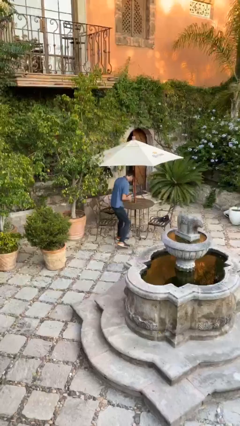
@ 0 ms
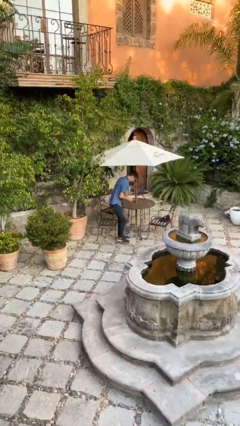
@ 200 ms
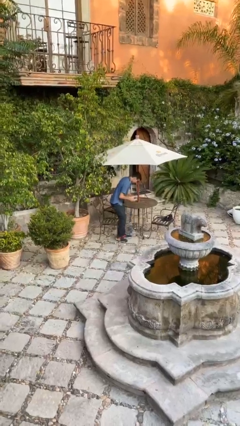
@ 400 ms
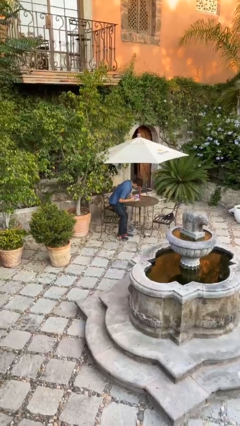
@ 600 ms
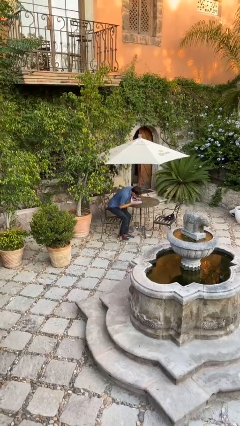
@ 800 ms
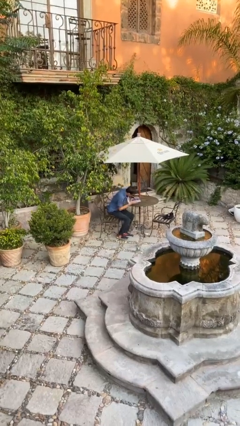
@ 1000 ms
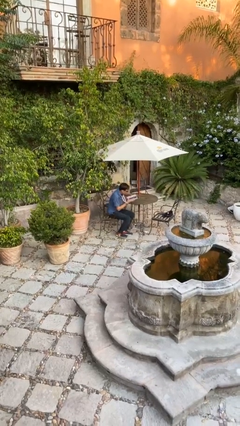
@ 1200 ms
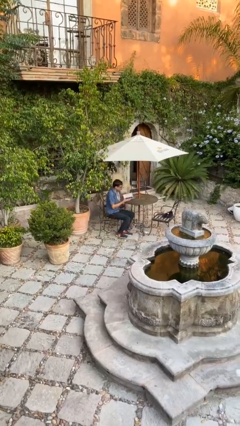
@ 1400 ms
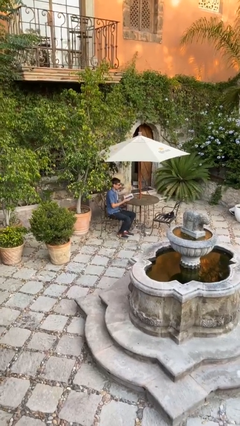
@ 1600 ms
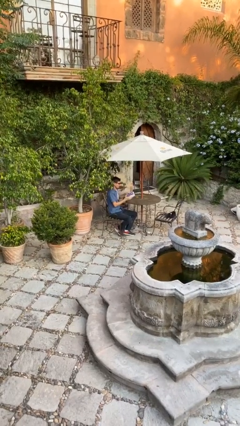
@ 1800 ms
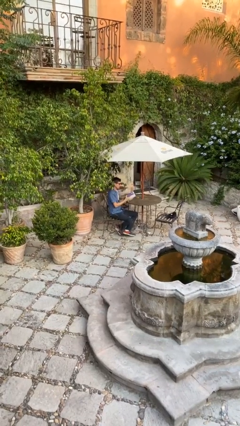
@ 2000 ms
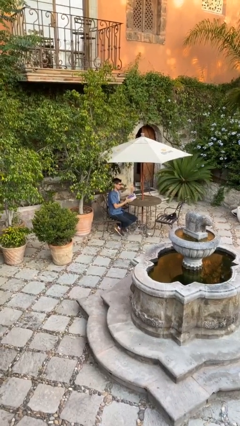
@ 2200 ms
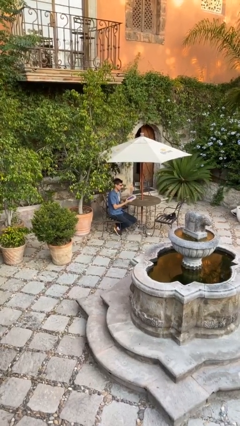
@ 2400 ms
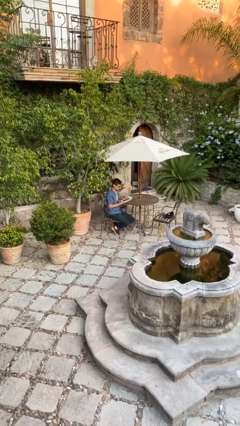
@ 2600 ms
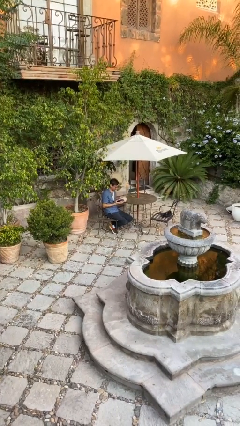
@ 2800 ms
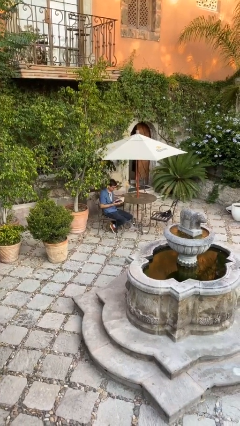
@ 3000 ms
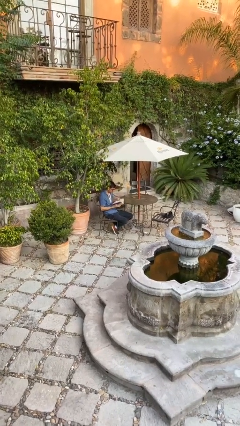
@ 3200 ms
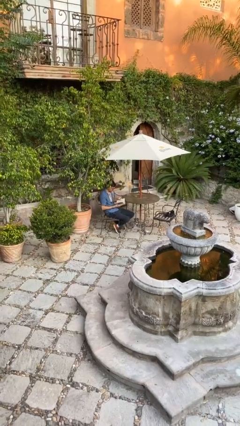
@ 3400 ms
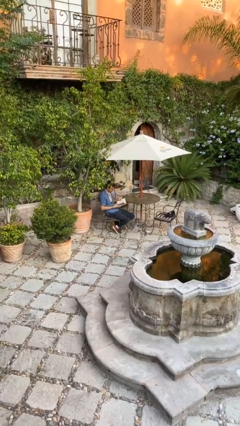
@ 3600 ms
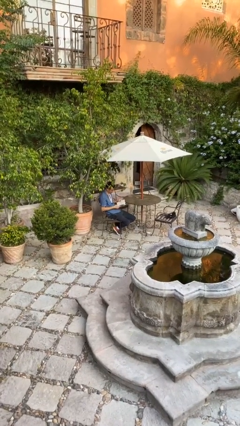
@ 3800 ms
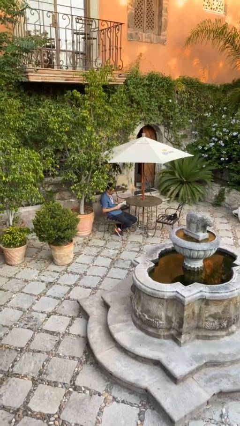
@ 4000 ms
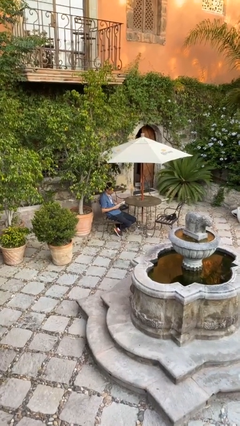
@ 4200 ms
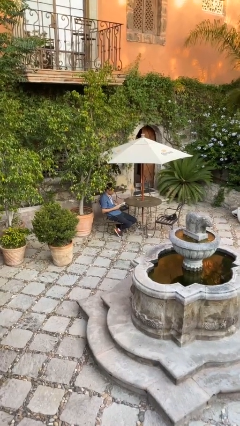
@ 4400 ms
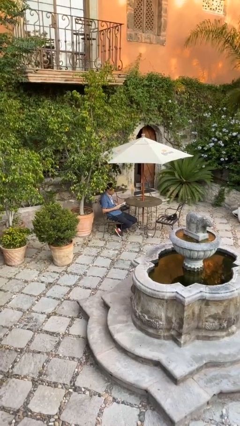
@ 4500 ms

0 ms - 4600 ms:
person sits down

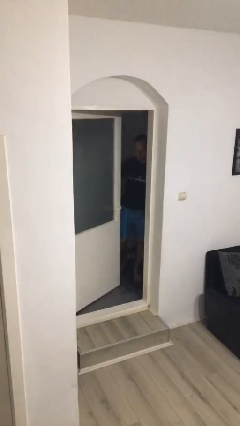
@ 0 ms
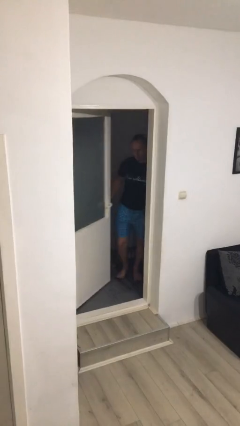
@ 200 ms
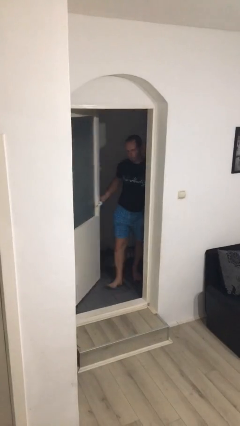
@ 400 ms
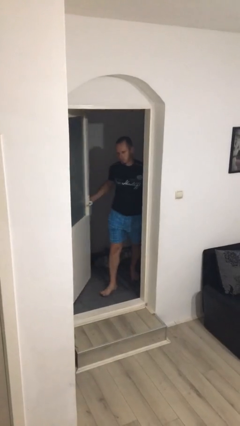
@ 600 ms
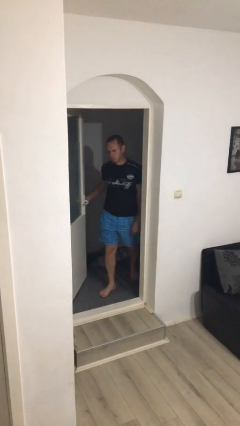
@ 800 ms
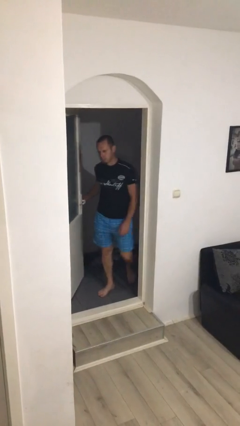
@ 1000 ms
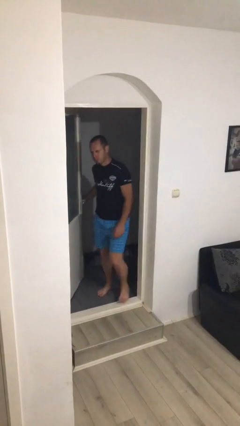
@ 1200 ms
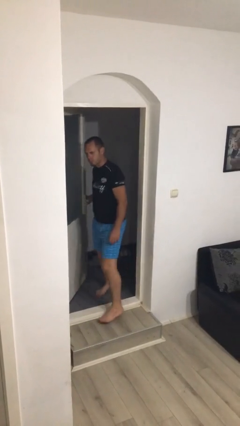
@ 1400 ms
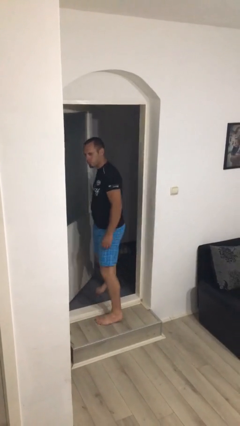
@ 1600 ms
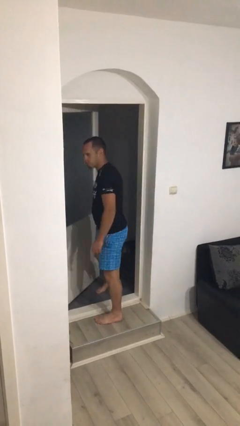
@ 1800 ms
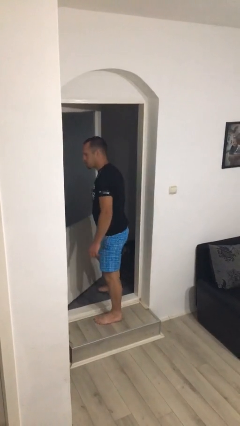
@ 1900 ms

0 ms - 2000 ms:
person opens facility door

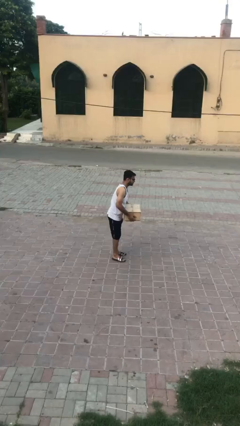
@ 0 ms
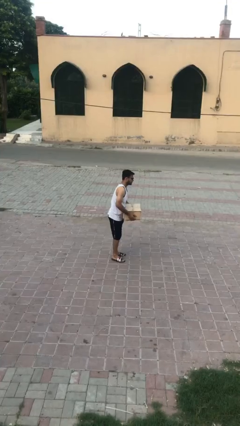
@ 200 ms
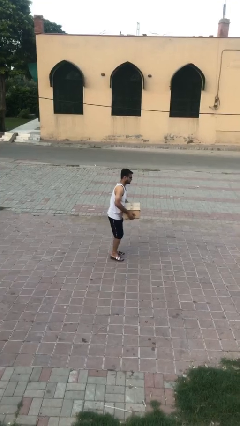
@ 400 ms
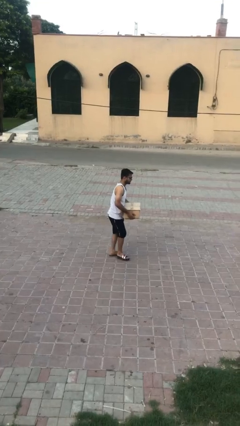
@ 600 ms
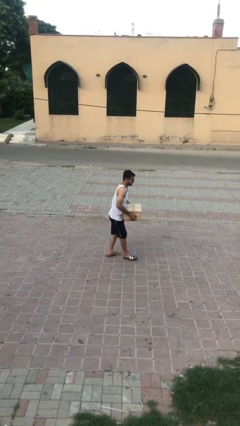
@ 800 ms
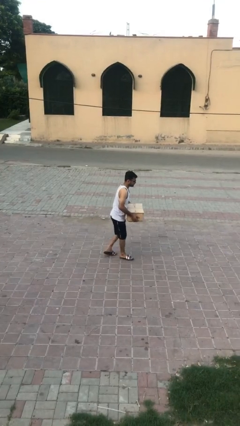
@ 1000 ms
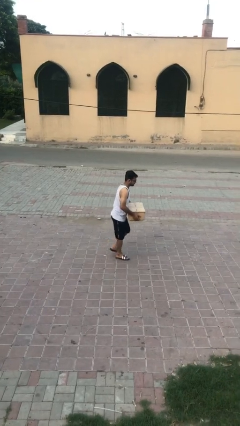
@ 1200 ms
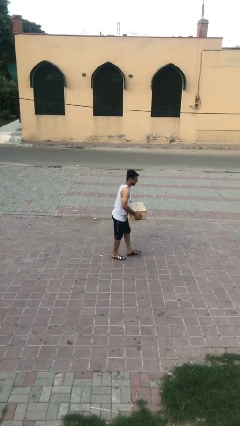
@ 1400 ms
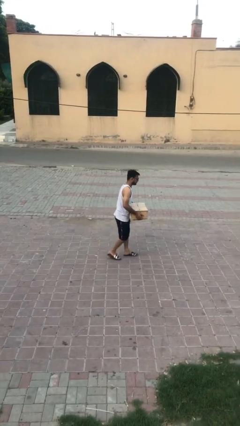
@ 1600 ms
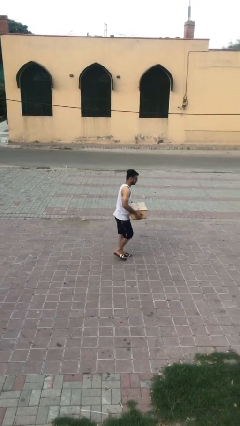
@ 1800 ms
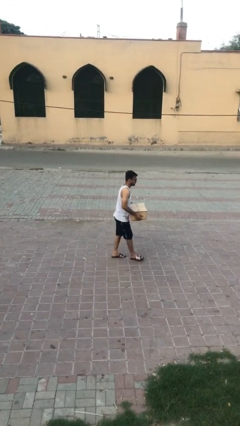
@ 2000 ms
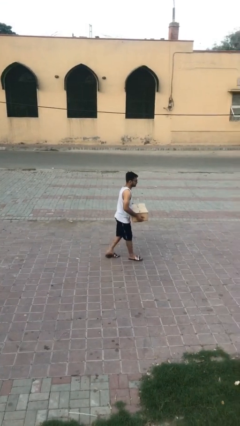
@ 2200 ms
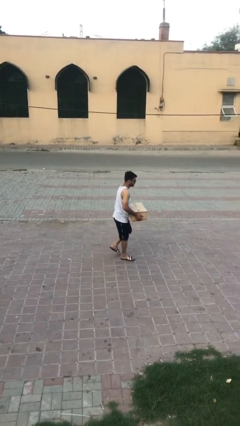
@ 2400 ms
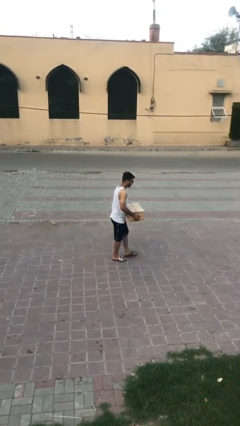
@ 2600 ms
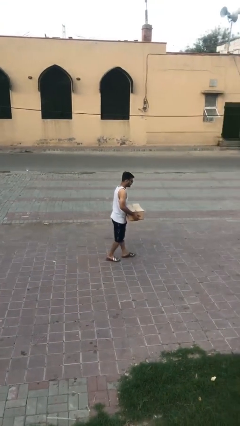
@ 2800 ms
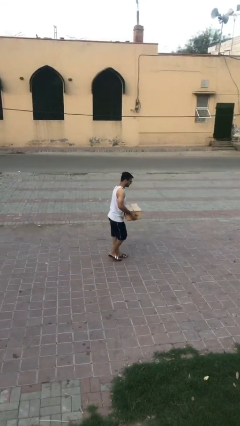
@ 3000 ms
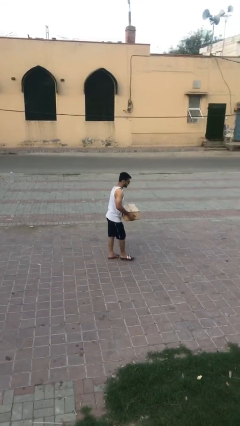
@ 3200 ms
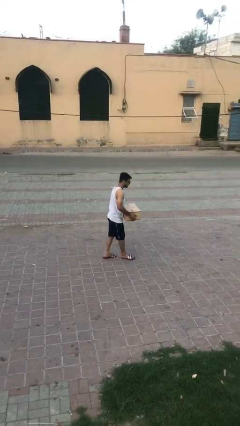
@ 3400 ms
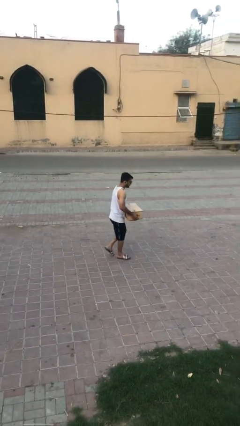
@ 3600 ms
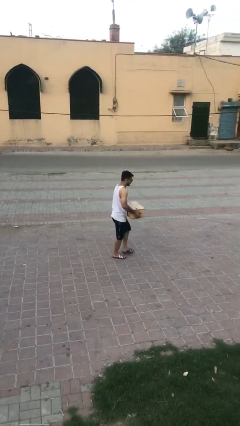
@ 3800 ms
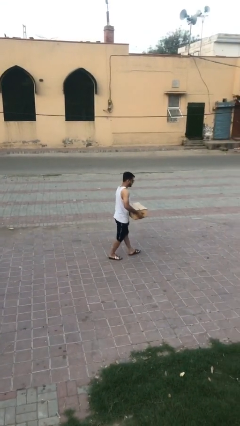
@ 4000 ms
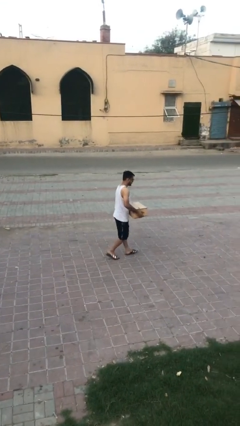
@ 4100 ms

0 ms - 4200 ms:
person carries heavy object

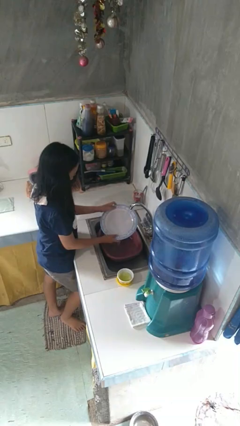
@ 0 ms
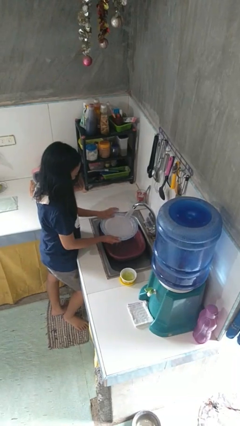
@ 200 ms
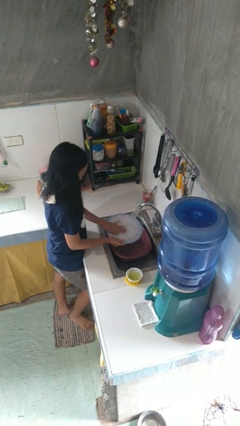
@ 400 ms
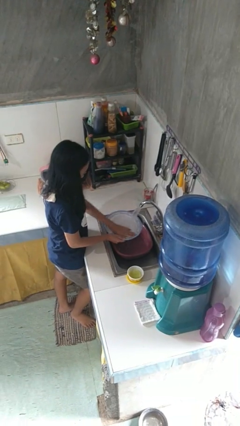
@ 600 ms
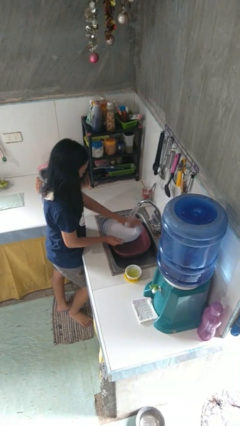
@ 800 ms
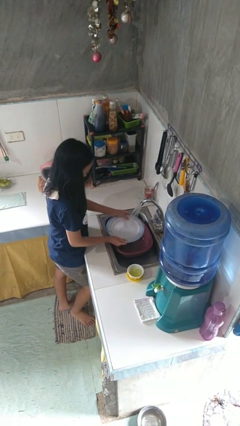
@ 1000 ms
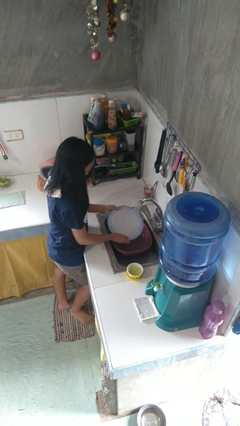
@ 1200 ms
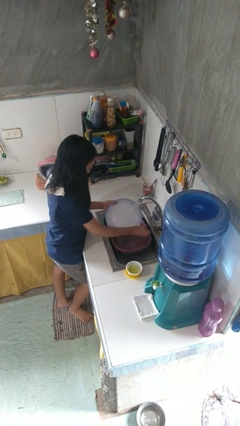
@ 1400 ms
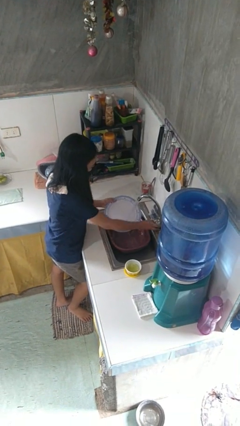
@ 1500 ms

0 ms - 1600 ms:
person washes dish

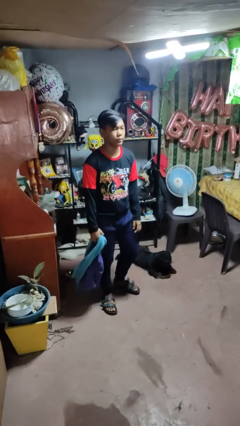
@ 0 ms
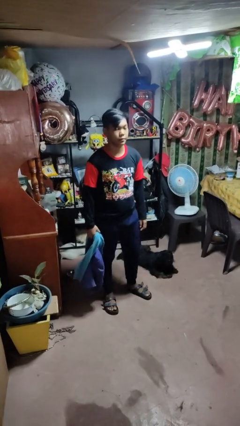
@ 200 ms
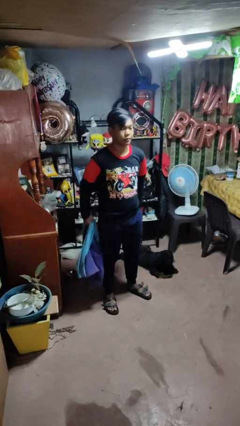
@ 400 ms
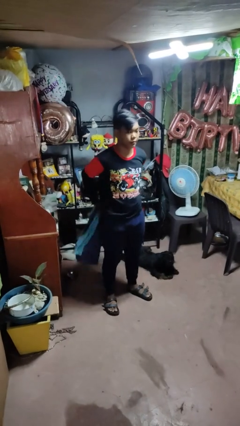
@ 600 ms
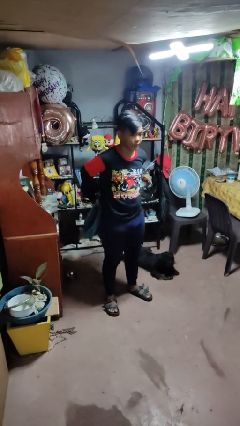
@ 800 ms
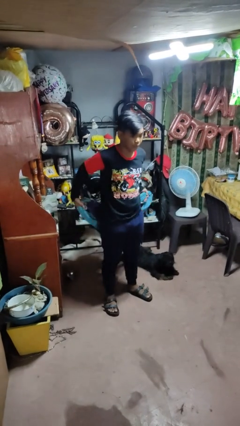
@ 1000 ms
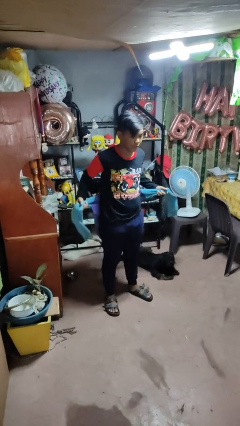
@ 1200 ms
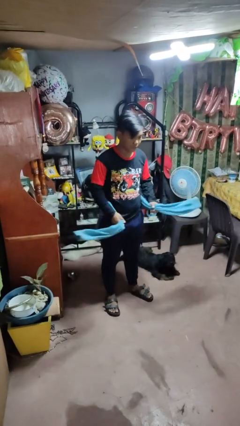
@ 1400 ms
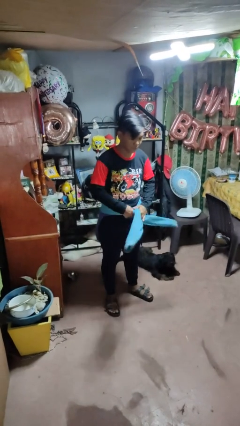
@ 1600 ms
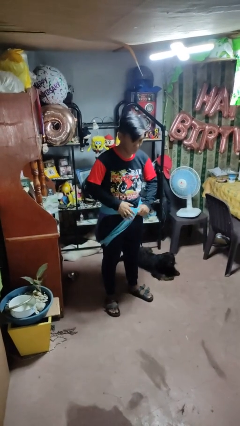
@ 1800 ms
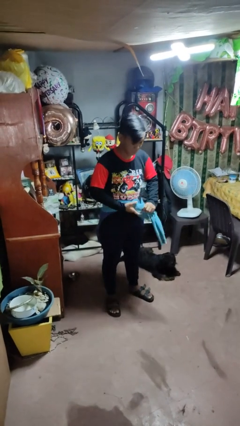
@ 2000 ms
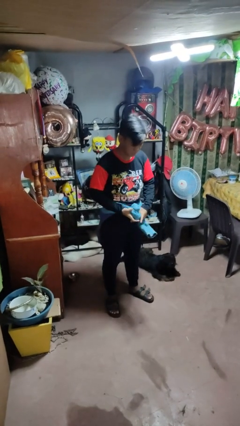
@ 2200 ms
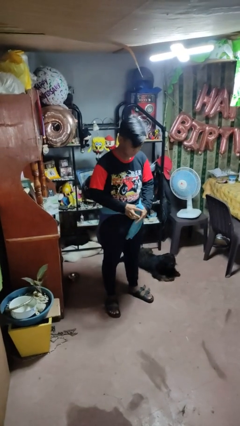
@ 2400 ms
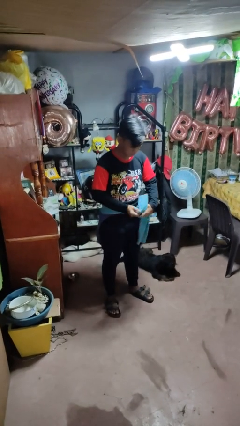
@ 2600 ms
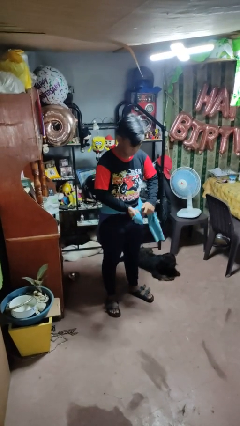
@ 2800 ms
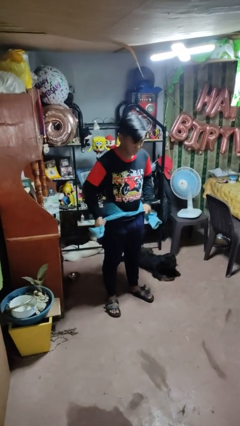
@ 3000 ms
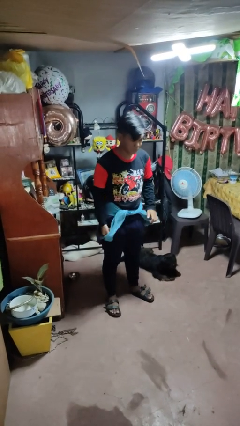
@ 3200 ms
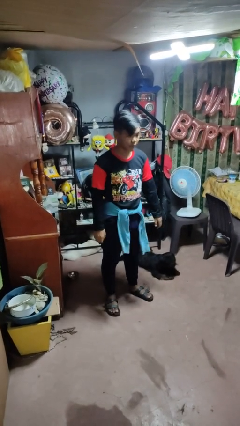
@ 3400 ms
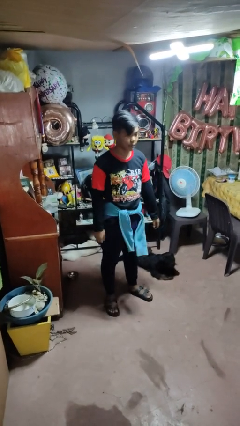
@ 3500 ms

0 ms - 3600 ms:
person ties jacket around waist

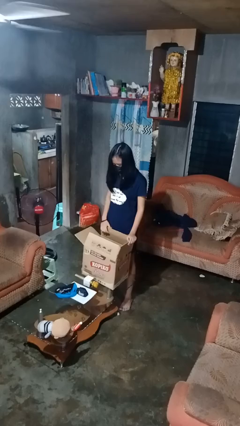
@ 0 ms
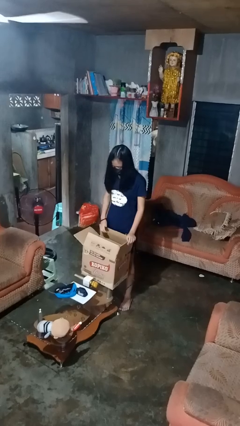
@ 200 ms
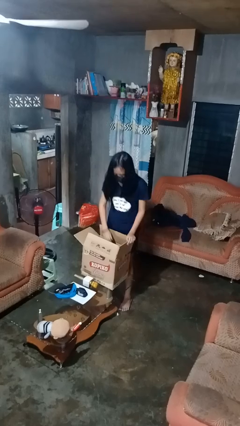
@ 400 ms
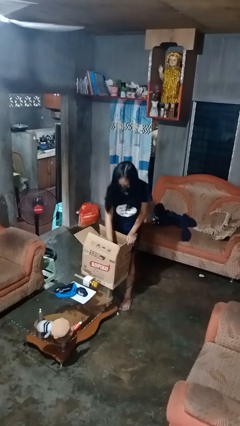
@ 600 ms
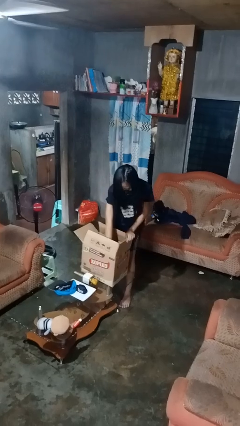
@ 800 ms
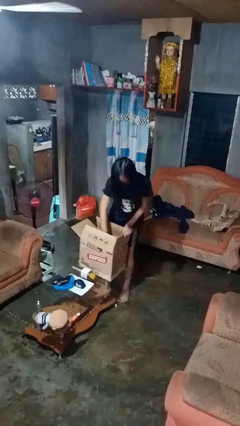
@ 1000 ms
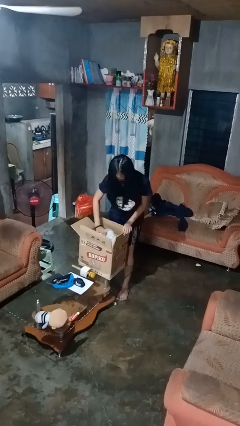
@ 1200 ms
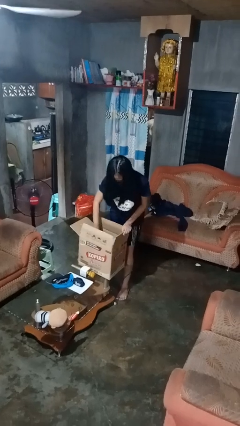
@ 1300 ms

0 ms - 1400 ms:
person searches in box
